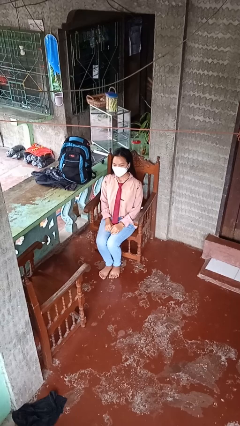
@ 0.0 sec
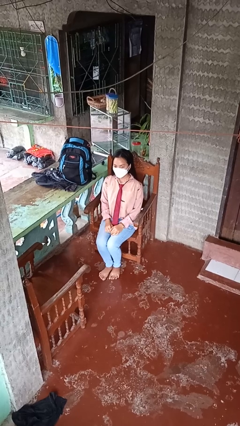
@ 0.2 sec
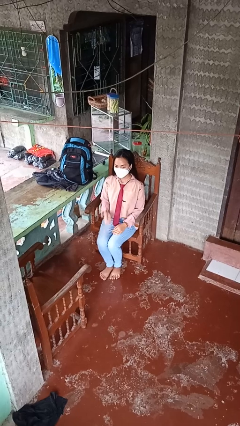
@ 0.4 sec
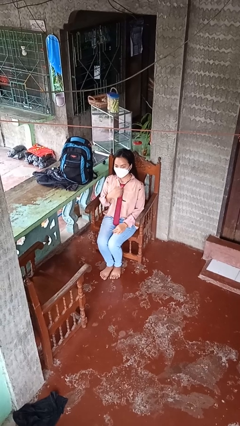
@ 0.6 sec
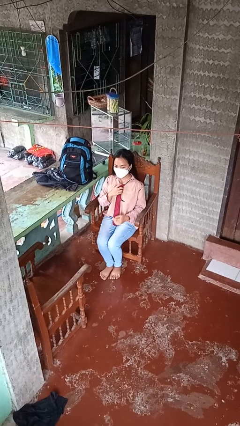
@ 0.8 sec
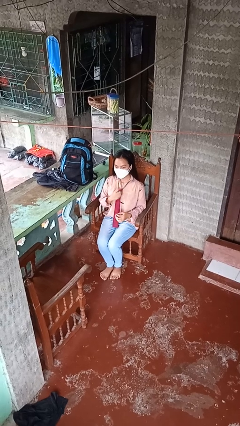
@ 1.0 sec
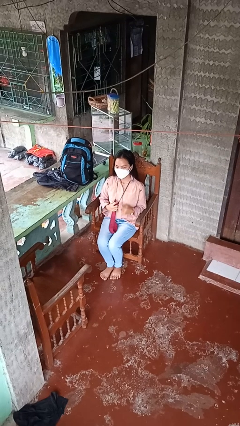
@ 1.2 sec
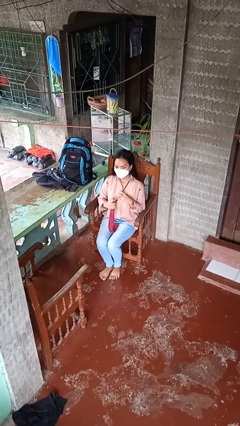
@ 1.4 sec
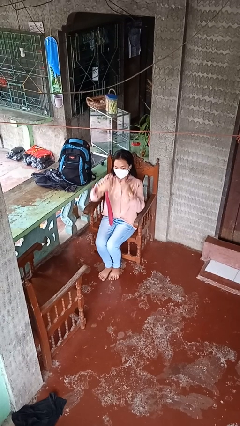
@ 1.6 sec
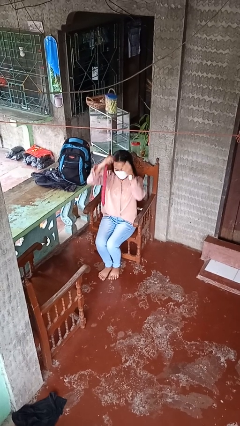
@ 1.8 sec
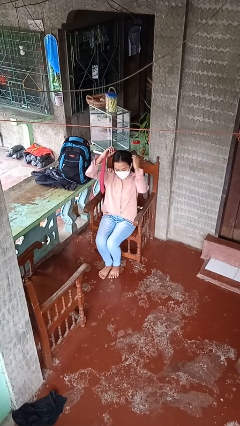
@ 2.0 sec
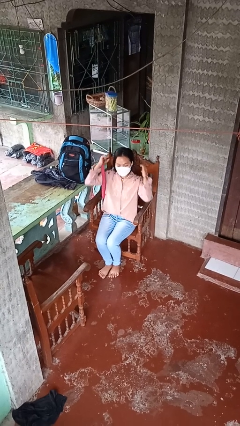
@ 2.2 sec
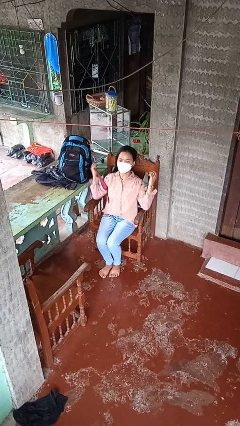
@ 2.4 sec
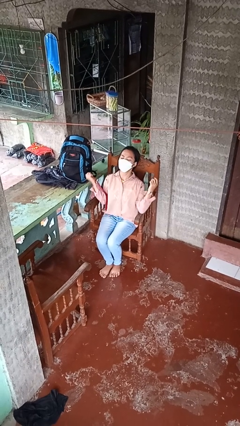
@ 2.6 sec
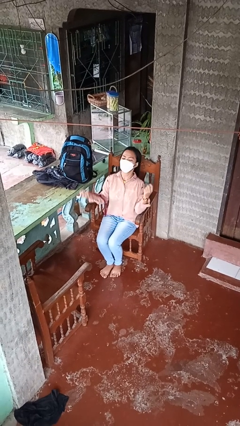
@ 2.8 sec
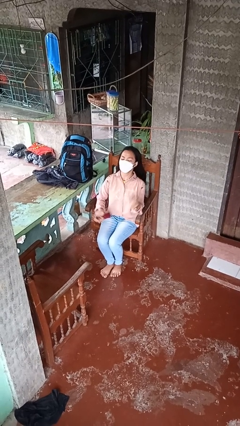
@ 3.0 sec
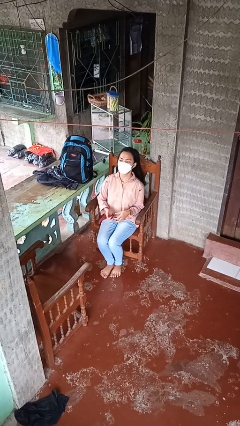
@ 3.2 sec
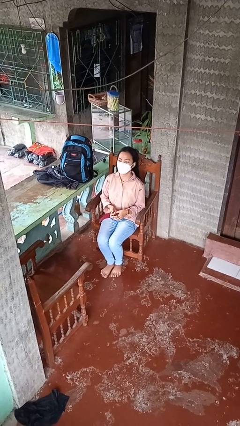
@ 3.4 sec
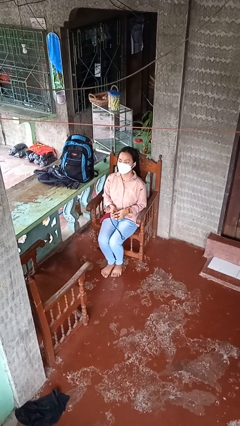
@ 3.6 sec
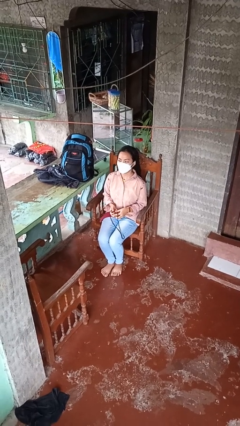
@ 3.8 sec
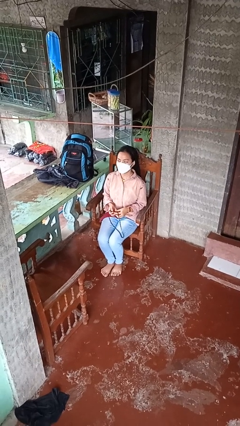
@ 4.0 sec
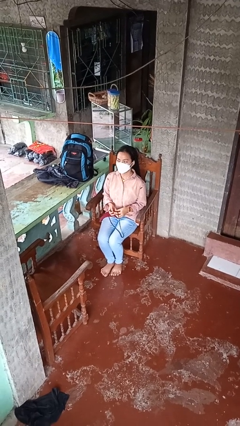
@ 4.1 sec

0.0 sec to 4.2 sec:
person takes off necktie

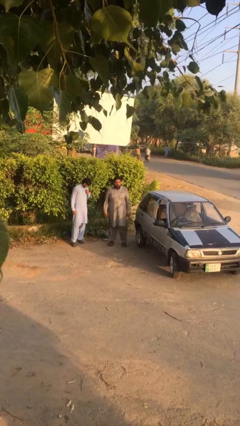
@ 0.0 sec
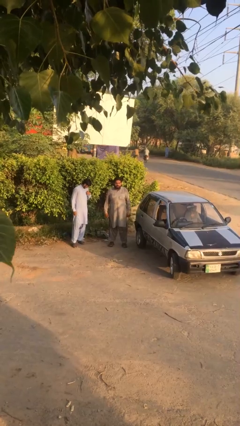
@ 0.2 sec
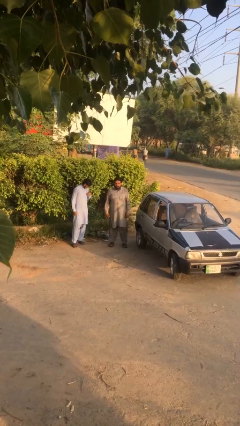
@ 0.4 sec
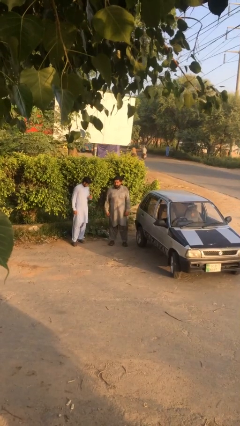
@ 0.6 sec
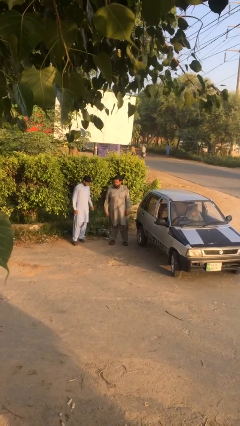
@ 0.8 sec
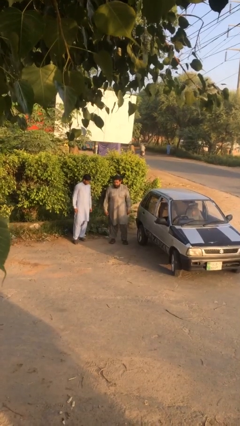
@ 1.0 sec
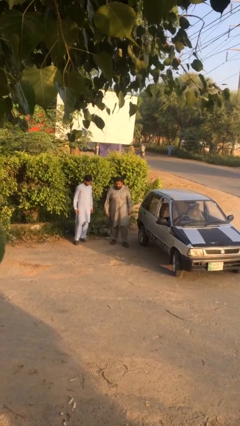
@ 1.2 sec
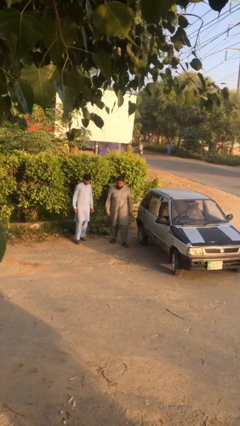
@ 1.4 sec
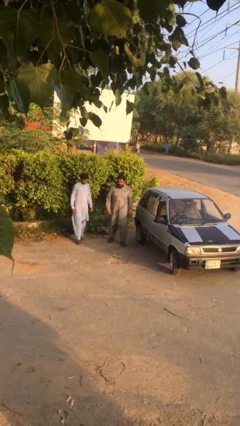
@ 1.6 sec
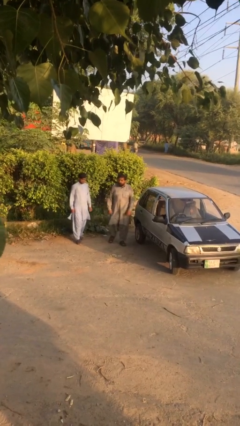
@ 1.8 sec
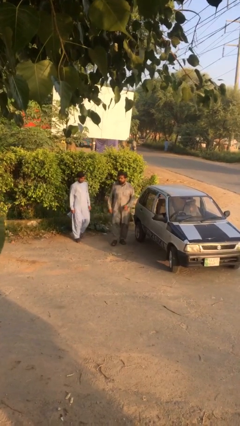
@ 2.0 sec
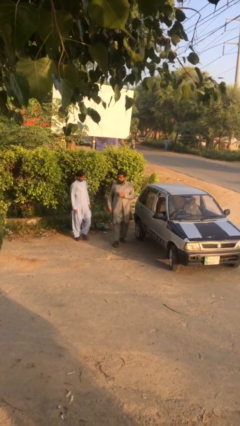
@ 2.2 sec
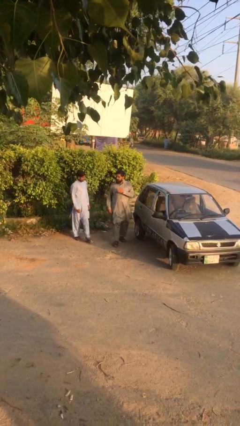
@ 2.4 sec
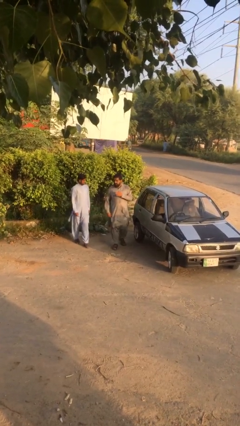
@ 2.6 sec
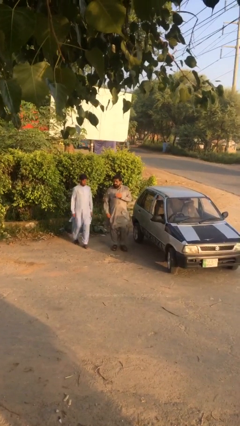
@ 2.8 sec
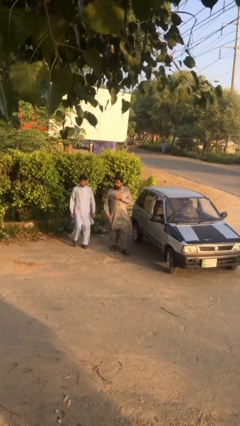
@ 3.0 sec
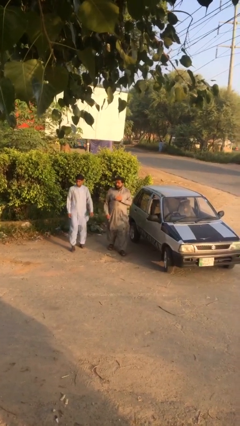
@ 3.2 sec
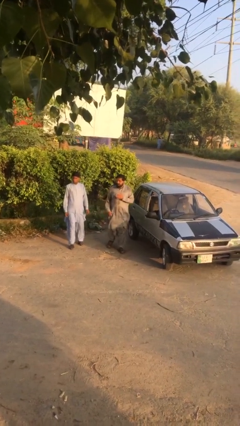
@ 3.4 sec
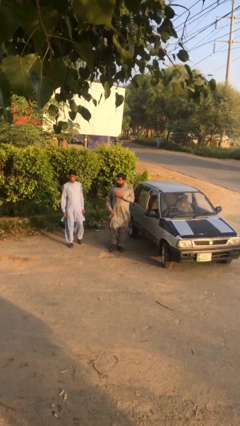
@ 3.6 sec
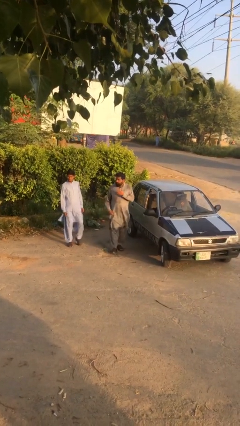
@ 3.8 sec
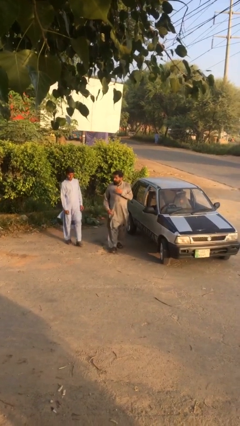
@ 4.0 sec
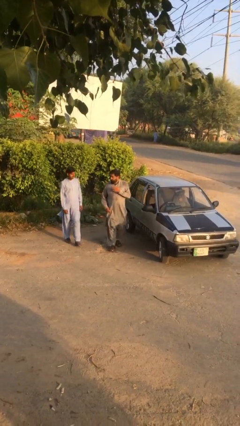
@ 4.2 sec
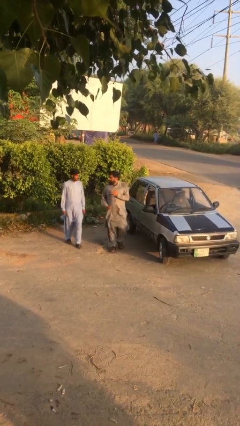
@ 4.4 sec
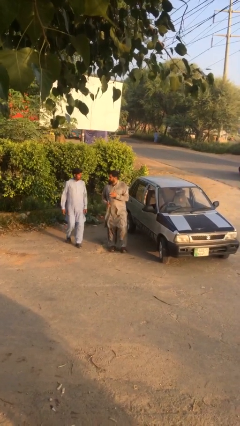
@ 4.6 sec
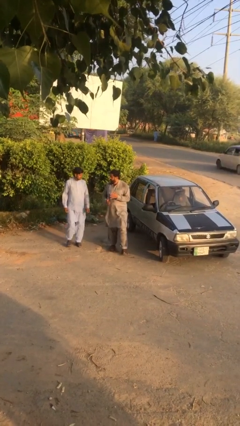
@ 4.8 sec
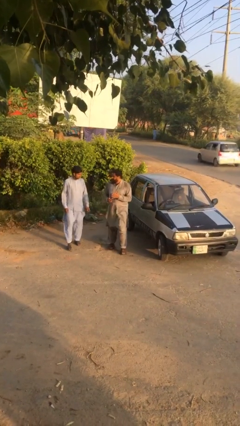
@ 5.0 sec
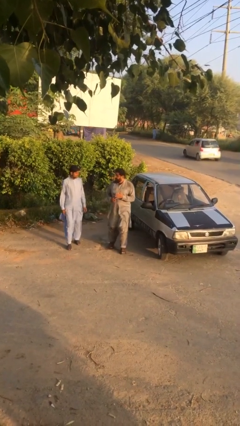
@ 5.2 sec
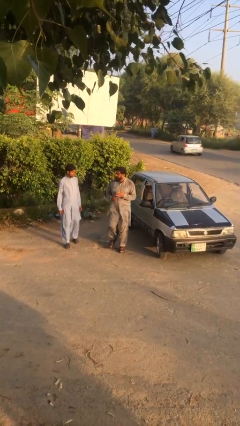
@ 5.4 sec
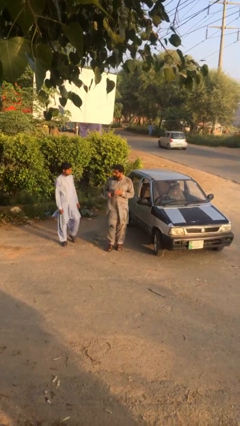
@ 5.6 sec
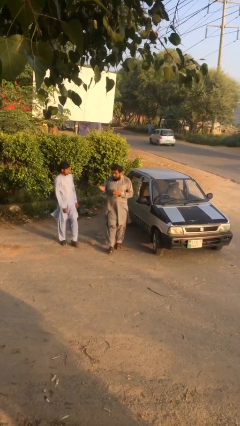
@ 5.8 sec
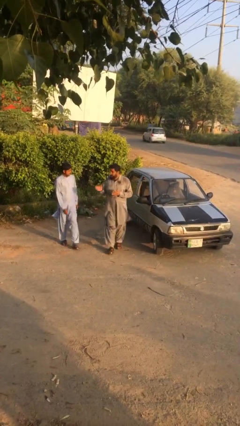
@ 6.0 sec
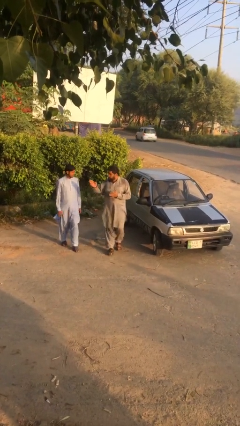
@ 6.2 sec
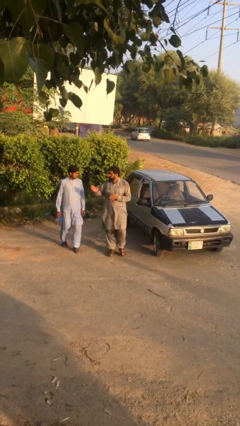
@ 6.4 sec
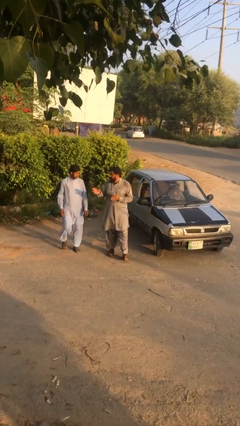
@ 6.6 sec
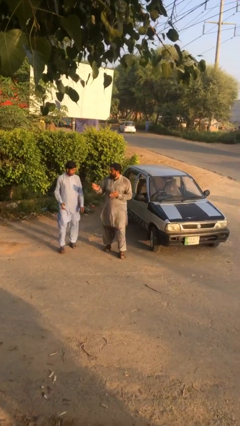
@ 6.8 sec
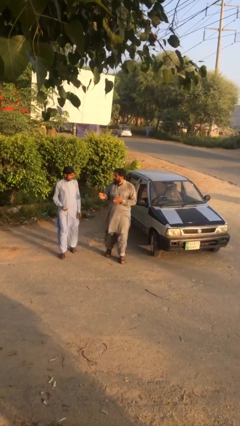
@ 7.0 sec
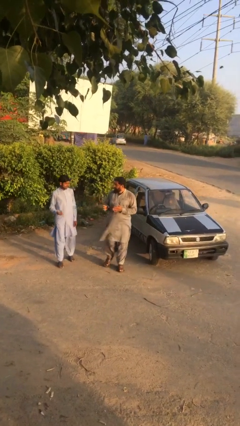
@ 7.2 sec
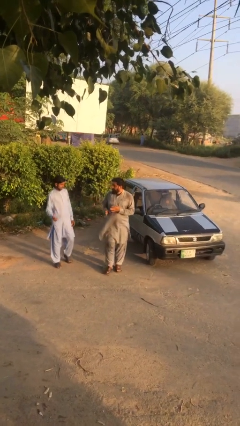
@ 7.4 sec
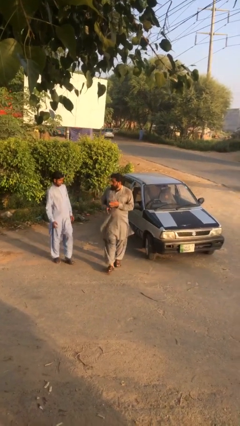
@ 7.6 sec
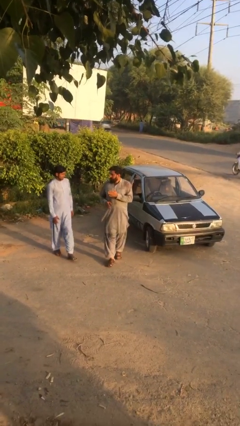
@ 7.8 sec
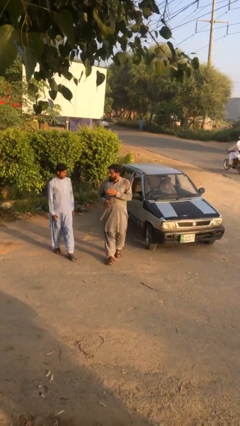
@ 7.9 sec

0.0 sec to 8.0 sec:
person talks to person

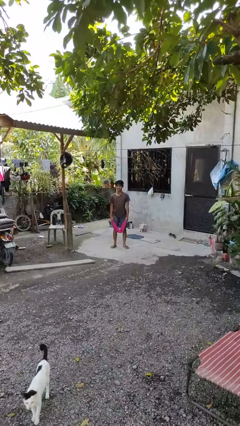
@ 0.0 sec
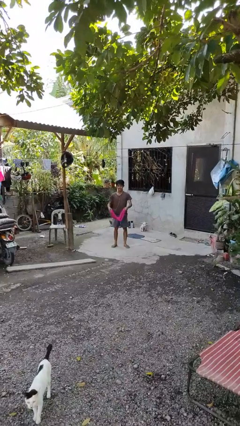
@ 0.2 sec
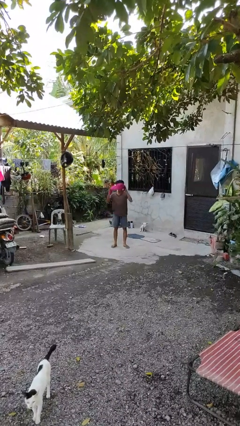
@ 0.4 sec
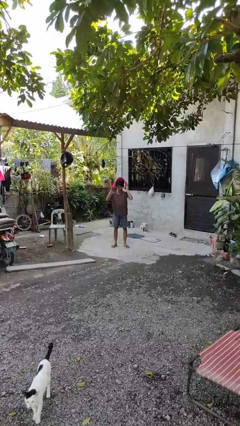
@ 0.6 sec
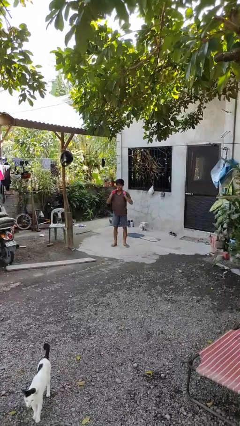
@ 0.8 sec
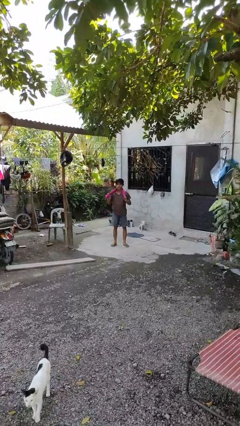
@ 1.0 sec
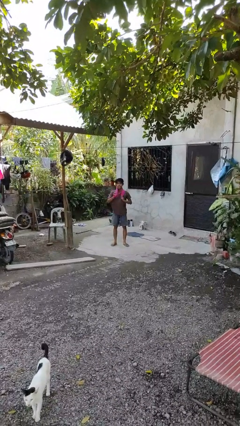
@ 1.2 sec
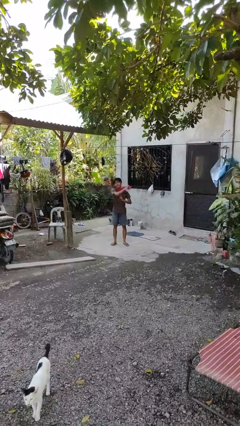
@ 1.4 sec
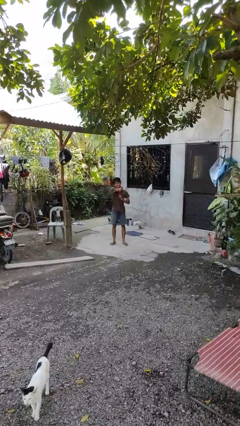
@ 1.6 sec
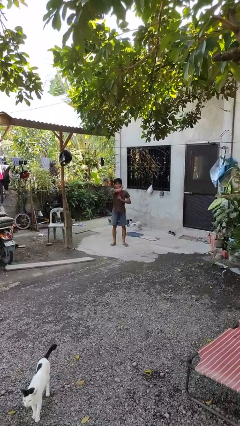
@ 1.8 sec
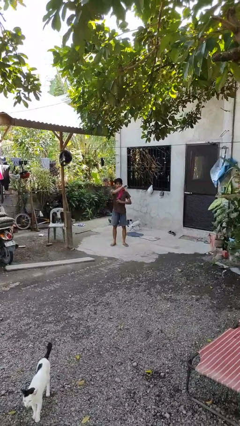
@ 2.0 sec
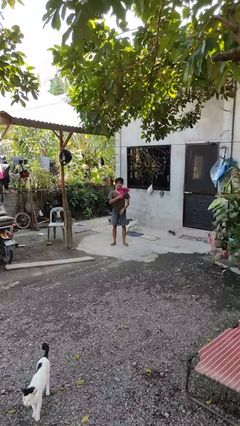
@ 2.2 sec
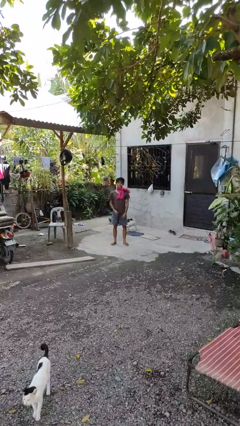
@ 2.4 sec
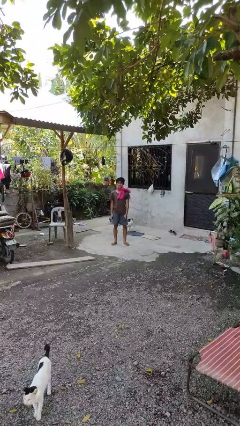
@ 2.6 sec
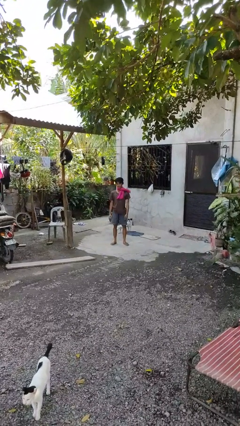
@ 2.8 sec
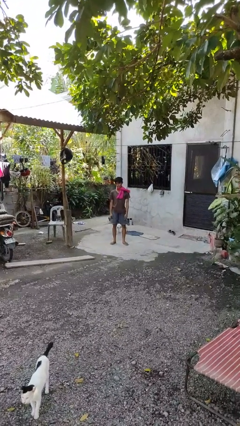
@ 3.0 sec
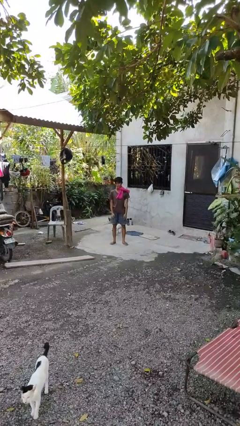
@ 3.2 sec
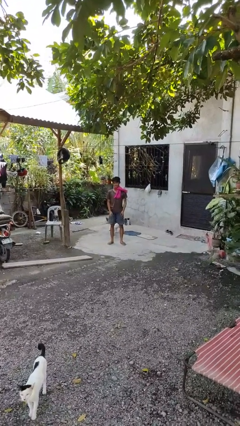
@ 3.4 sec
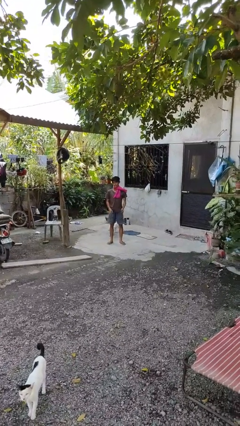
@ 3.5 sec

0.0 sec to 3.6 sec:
person puts on scarf

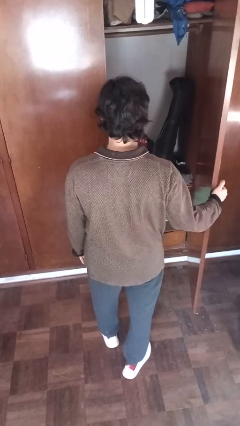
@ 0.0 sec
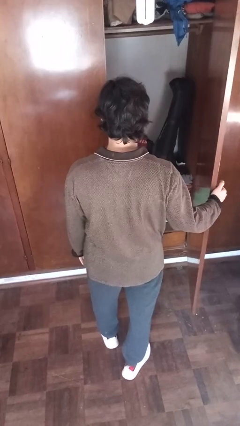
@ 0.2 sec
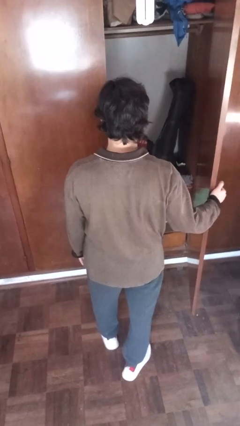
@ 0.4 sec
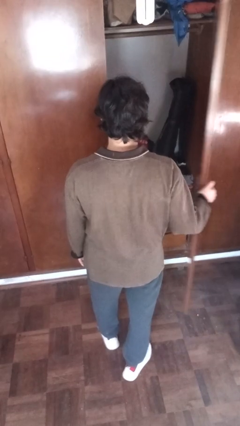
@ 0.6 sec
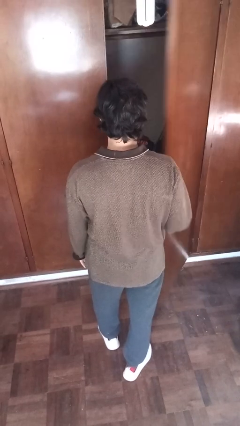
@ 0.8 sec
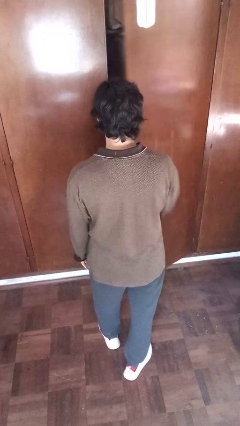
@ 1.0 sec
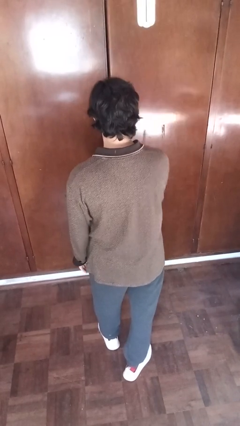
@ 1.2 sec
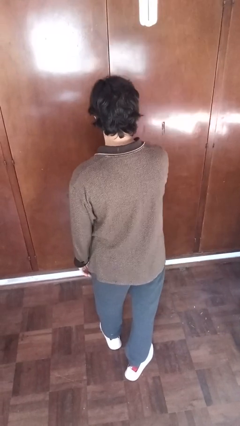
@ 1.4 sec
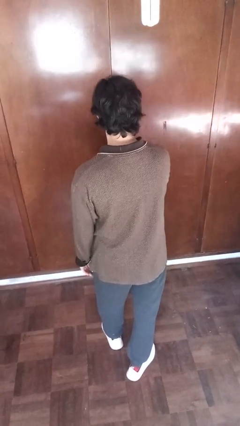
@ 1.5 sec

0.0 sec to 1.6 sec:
person closes closet door

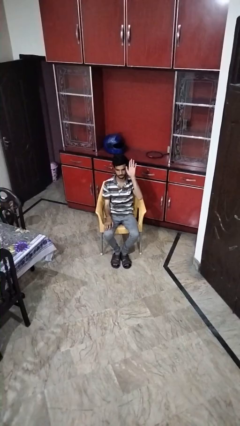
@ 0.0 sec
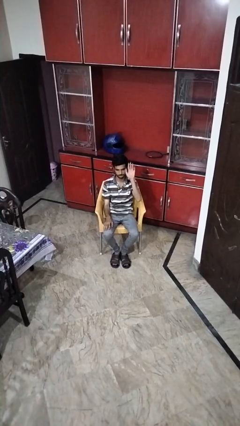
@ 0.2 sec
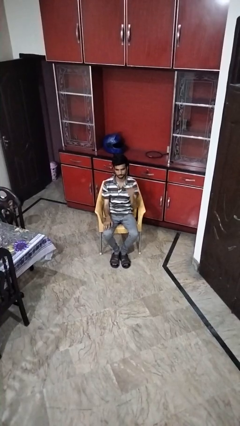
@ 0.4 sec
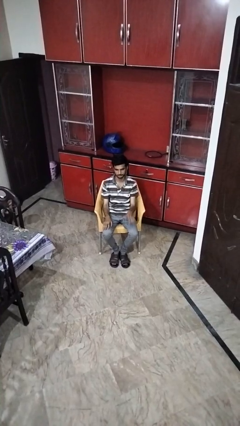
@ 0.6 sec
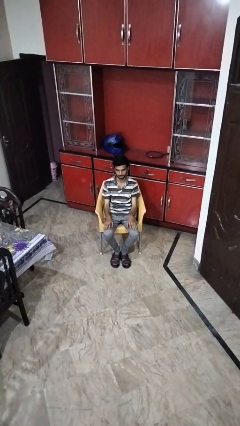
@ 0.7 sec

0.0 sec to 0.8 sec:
person gestures lower hand
